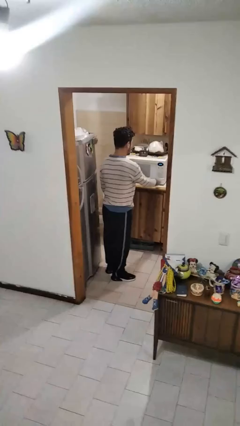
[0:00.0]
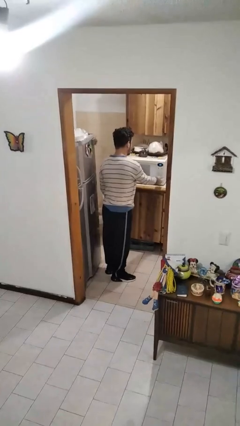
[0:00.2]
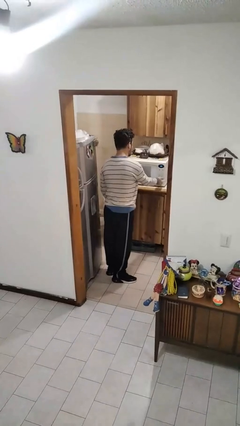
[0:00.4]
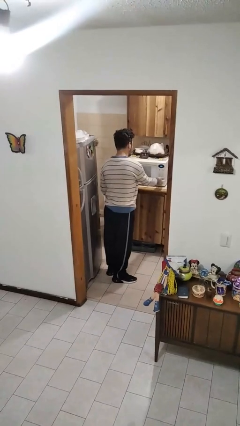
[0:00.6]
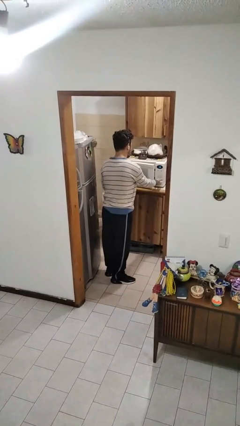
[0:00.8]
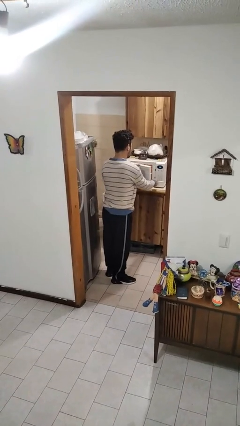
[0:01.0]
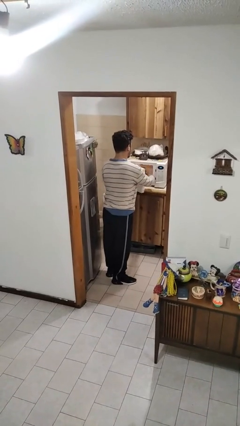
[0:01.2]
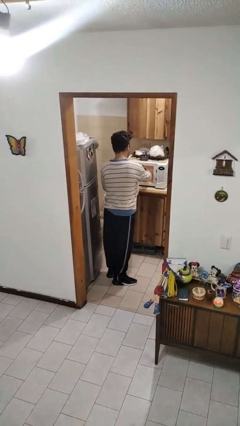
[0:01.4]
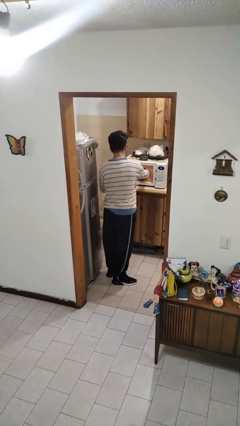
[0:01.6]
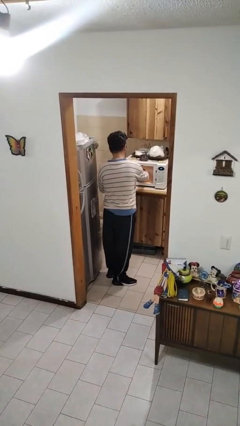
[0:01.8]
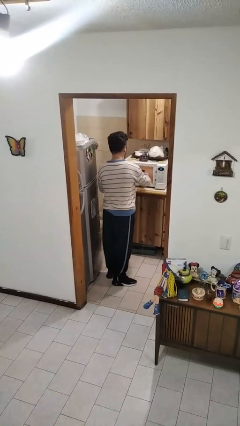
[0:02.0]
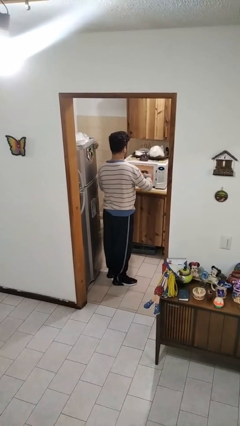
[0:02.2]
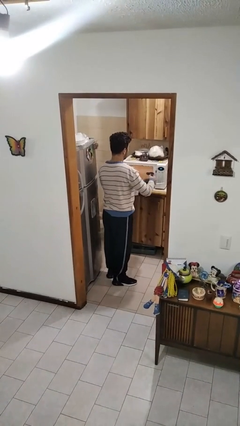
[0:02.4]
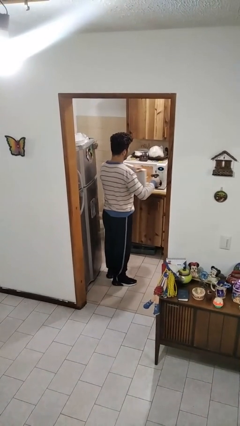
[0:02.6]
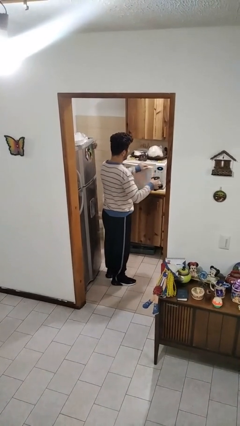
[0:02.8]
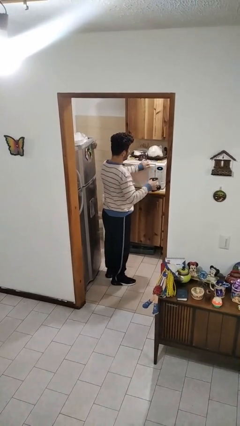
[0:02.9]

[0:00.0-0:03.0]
person takes object from microwave

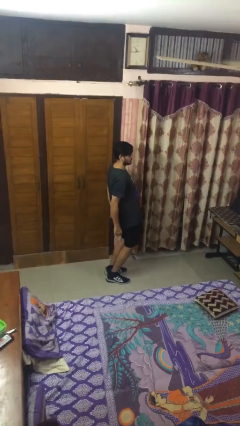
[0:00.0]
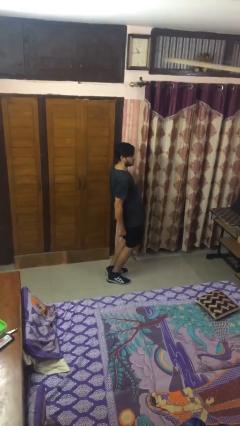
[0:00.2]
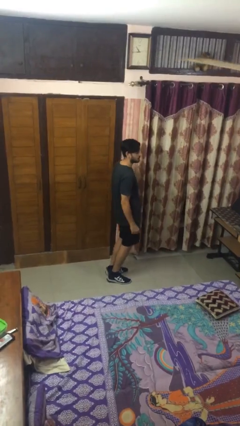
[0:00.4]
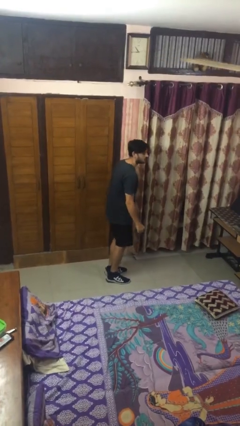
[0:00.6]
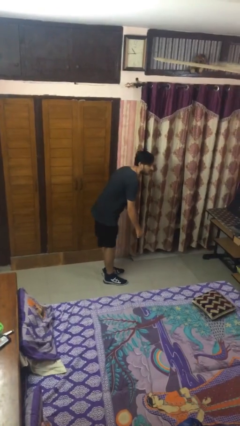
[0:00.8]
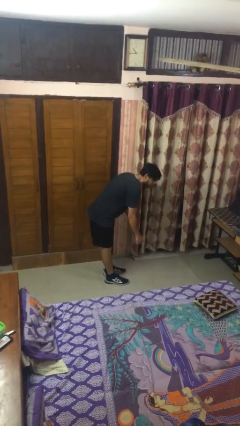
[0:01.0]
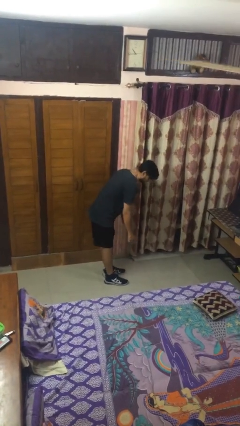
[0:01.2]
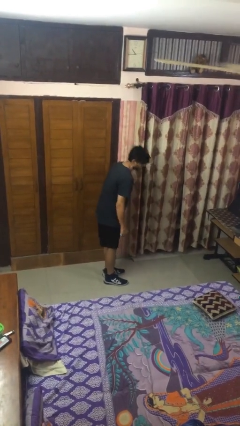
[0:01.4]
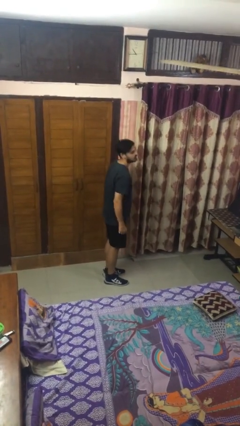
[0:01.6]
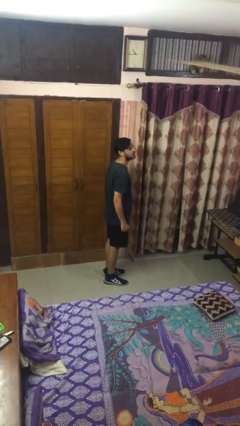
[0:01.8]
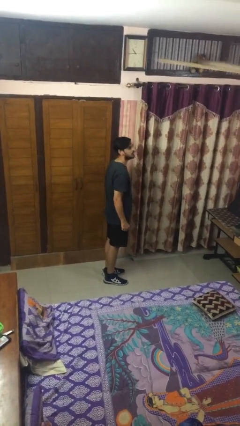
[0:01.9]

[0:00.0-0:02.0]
person wiggles hips

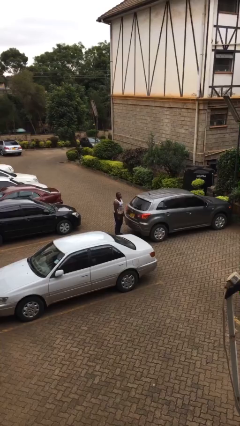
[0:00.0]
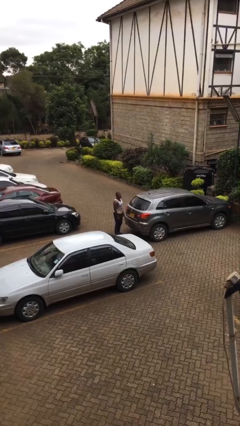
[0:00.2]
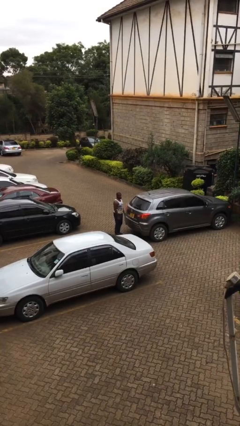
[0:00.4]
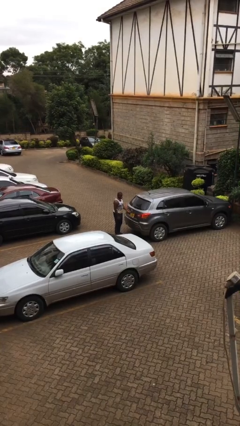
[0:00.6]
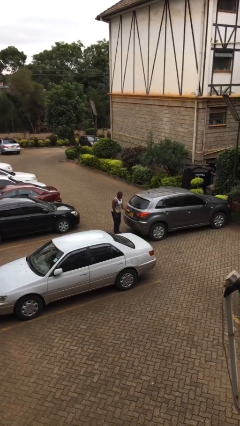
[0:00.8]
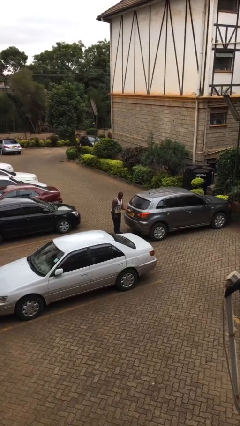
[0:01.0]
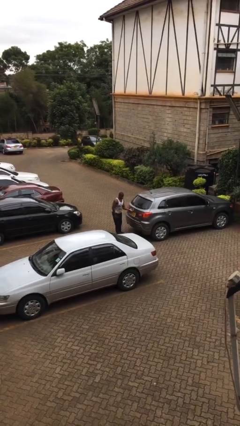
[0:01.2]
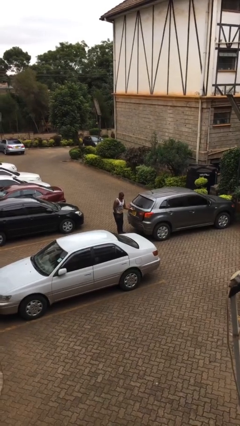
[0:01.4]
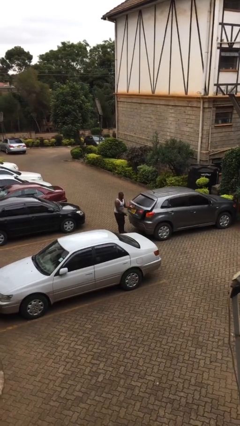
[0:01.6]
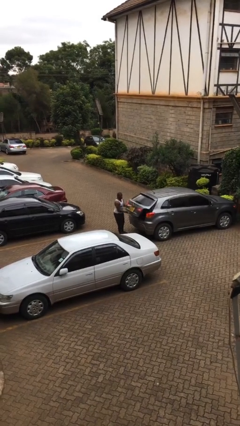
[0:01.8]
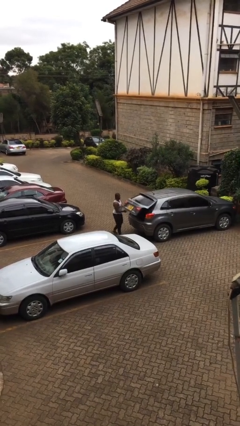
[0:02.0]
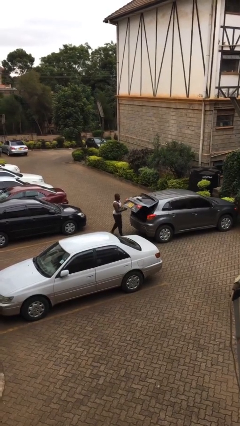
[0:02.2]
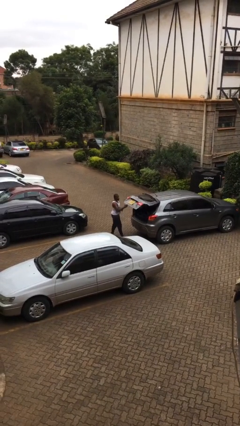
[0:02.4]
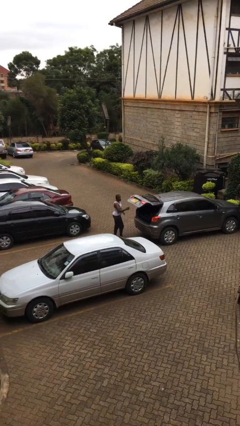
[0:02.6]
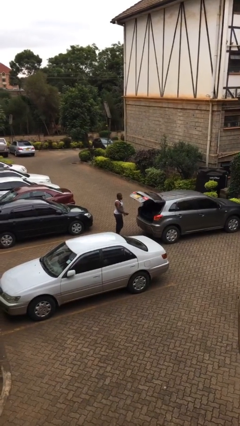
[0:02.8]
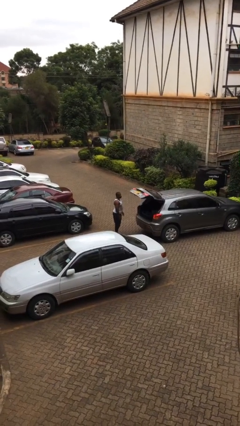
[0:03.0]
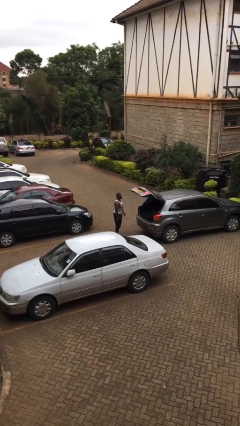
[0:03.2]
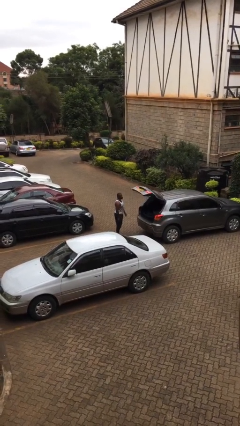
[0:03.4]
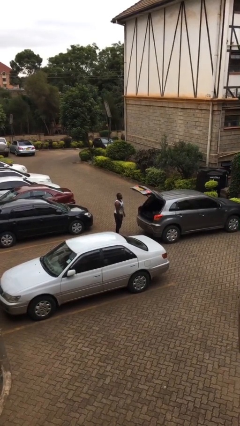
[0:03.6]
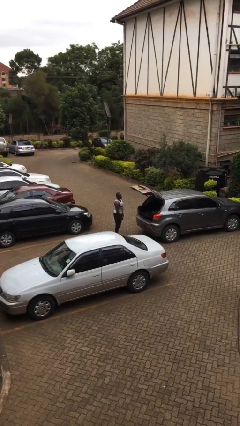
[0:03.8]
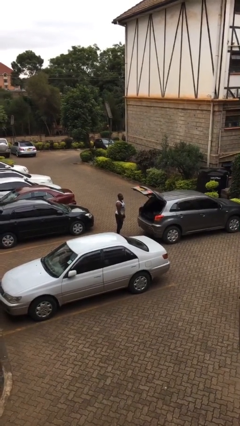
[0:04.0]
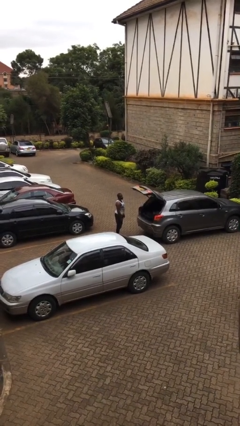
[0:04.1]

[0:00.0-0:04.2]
person opens car trunk

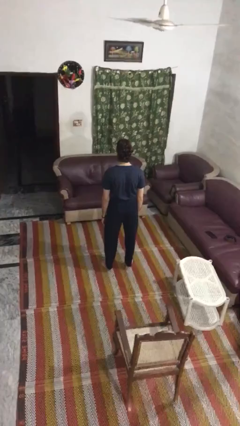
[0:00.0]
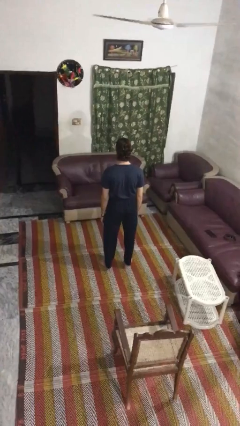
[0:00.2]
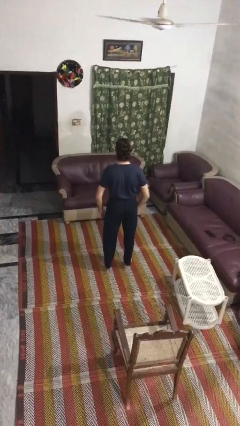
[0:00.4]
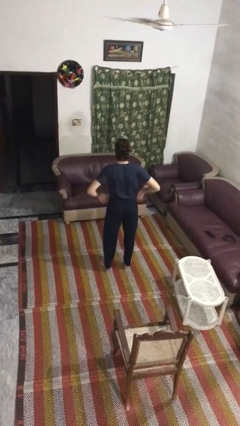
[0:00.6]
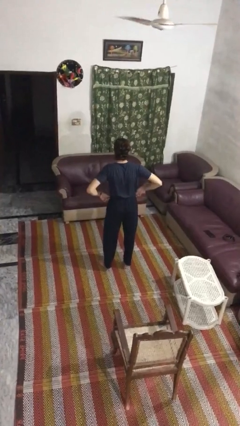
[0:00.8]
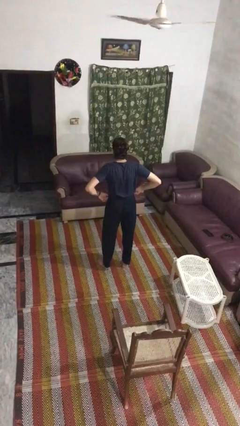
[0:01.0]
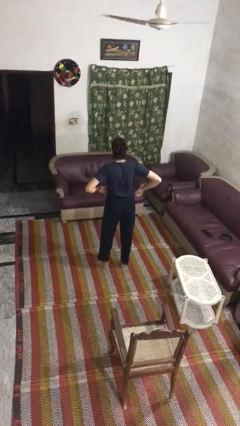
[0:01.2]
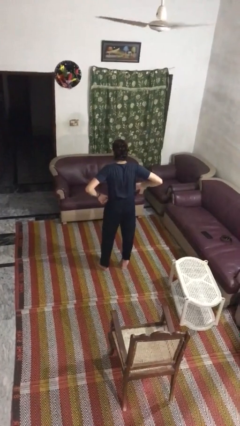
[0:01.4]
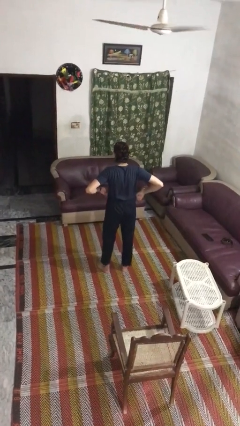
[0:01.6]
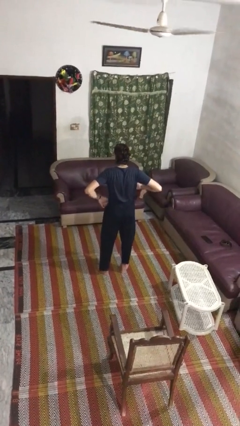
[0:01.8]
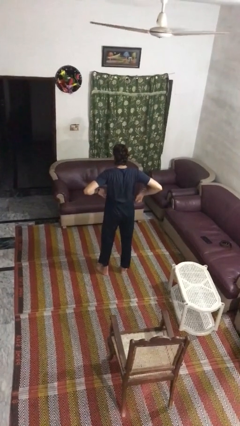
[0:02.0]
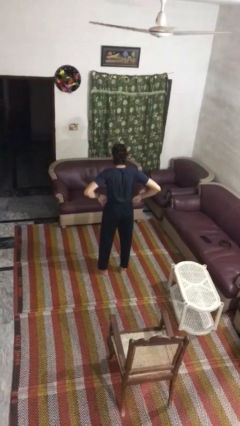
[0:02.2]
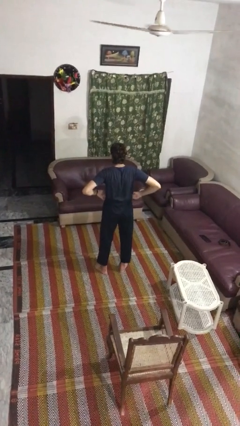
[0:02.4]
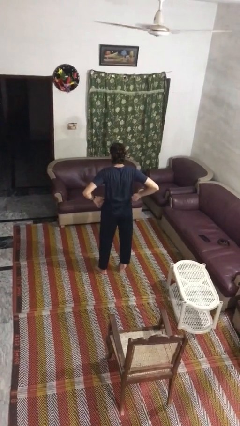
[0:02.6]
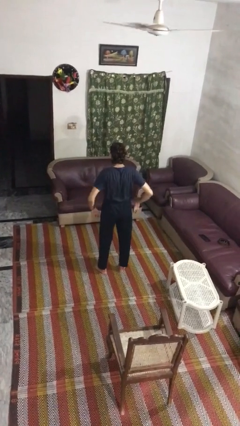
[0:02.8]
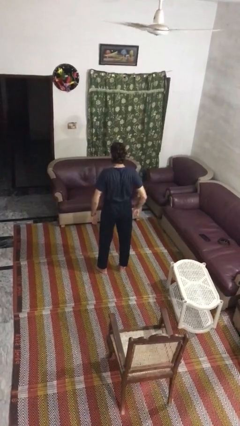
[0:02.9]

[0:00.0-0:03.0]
person hikes up pants

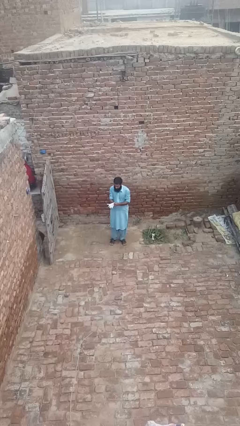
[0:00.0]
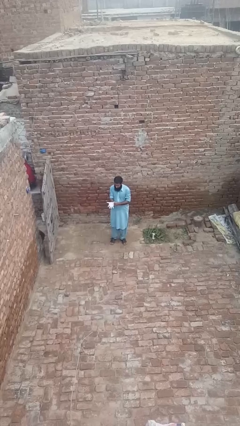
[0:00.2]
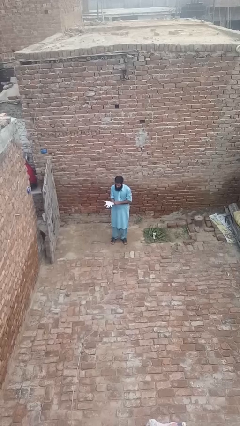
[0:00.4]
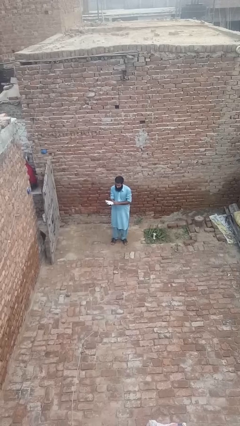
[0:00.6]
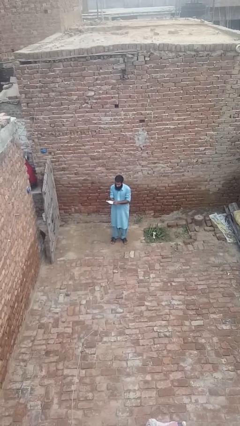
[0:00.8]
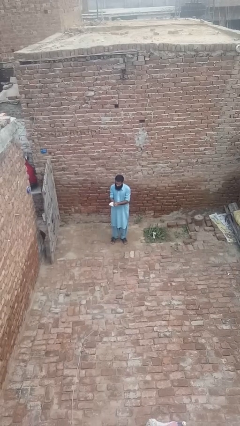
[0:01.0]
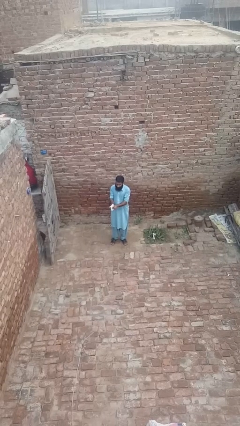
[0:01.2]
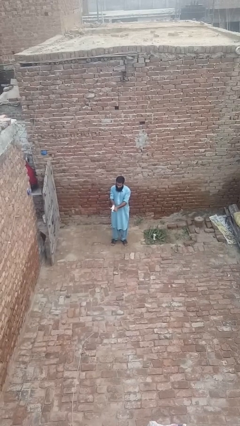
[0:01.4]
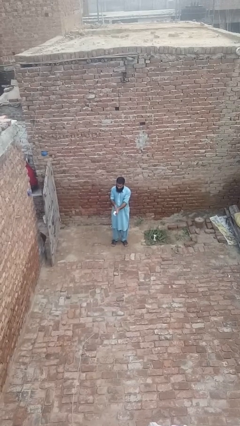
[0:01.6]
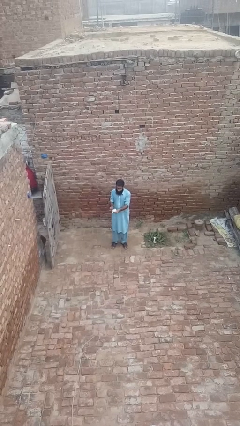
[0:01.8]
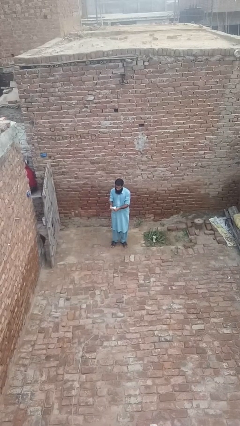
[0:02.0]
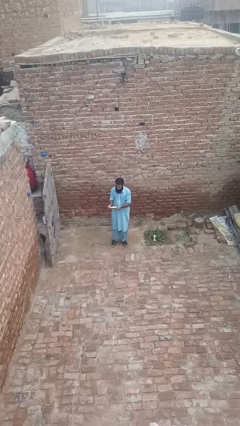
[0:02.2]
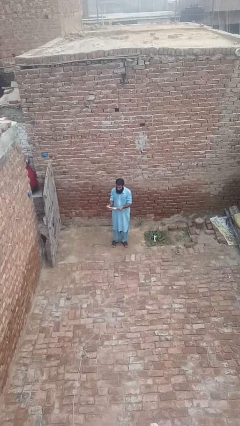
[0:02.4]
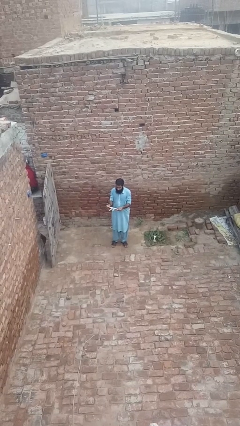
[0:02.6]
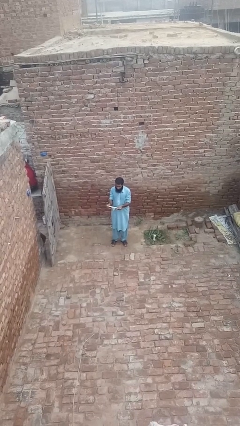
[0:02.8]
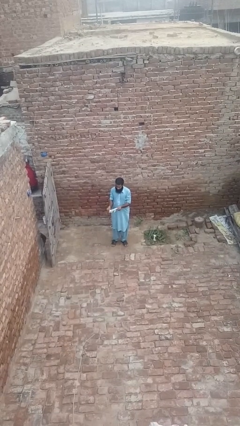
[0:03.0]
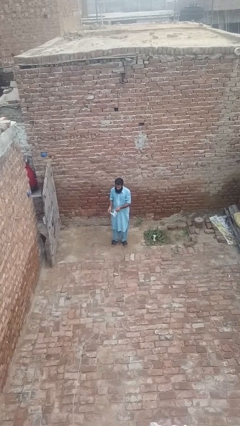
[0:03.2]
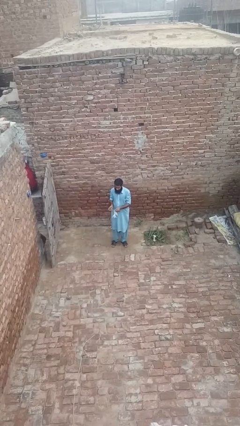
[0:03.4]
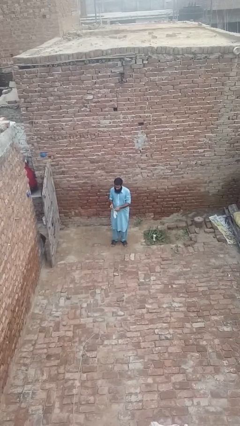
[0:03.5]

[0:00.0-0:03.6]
person takes off gloves

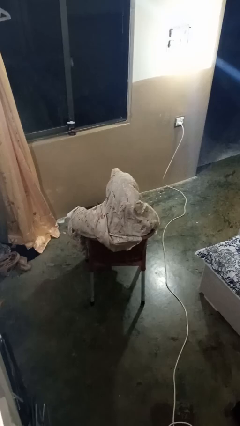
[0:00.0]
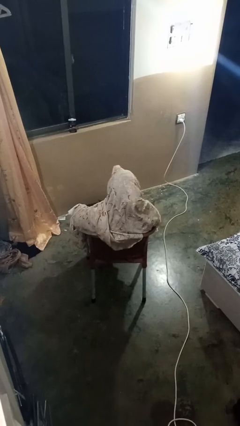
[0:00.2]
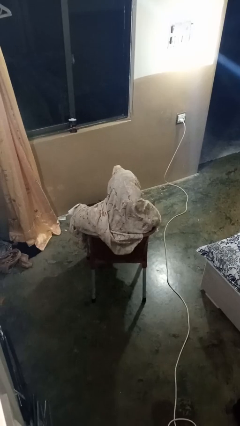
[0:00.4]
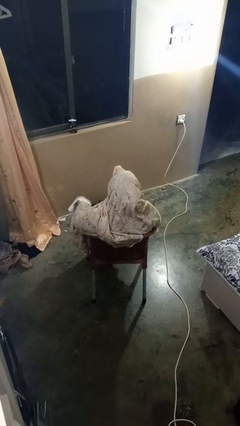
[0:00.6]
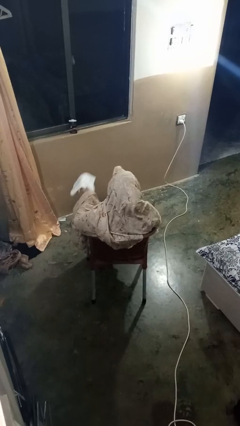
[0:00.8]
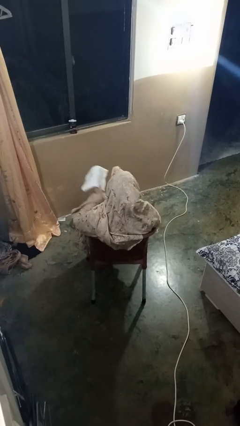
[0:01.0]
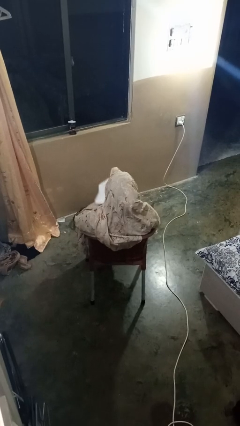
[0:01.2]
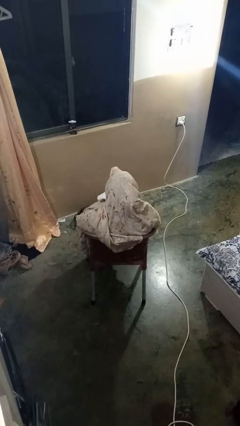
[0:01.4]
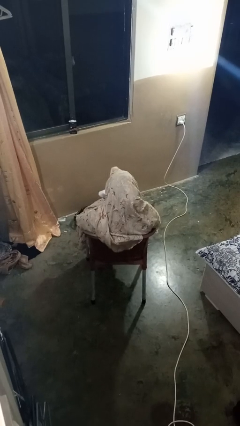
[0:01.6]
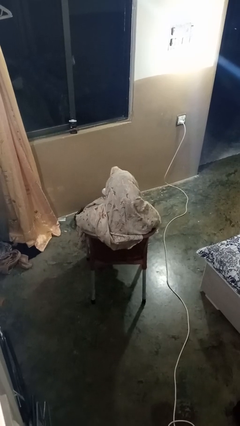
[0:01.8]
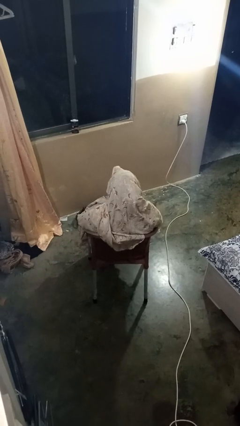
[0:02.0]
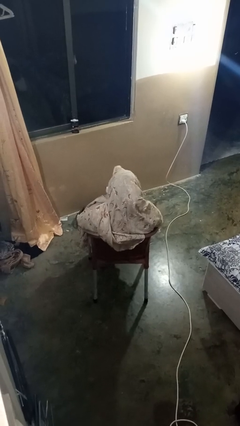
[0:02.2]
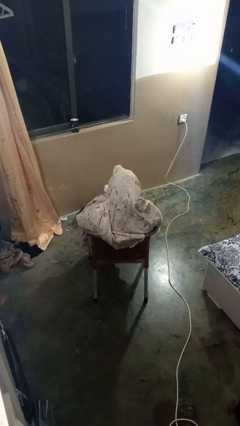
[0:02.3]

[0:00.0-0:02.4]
person wipes mouth with napkin
